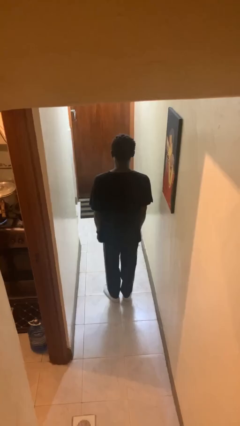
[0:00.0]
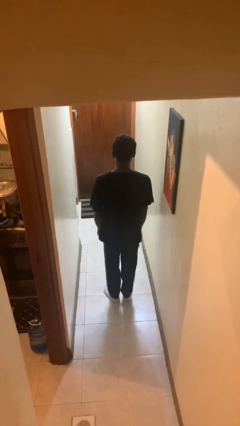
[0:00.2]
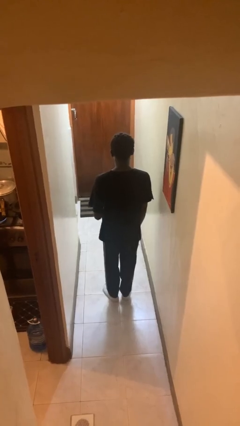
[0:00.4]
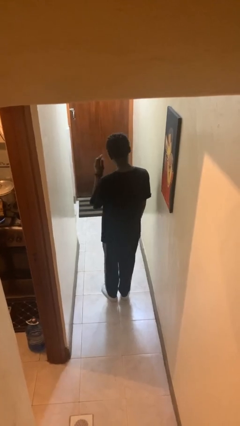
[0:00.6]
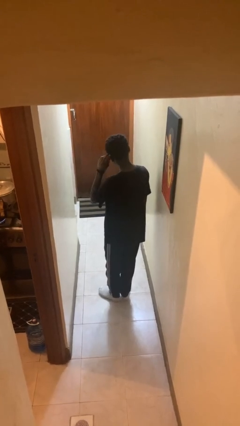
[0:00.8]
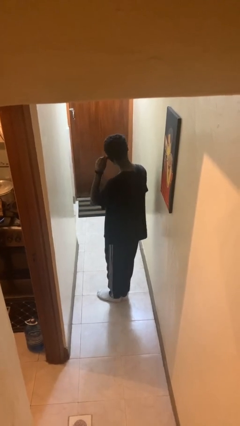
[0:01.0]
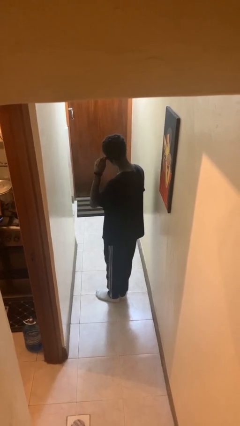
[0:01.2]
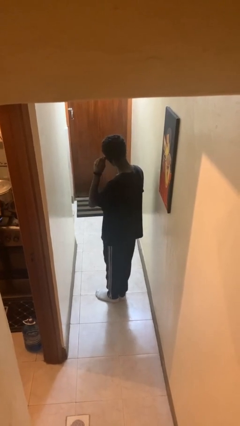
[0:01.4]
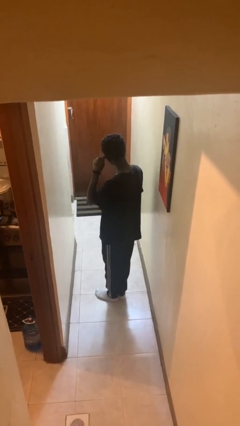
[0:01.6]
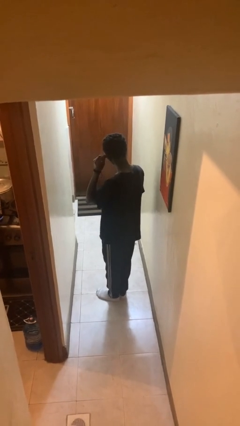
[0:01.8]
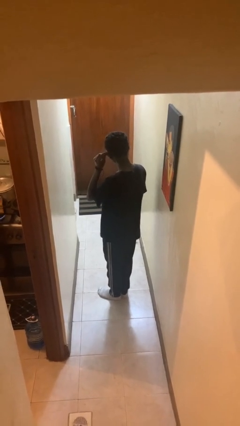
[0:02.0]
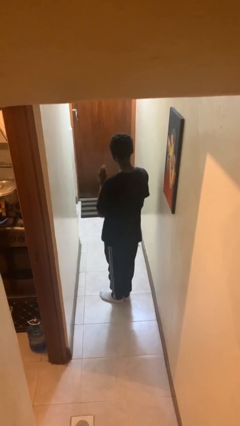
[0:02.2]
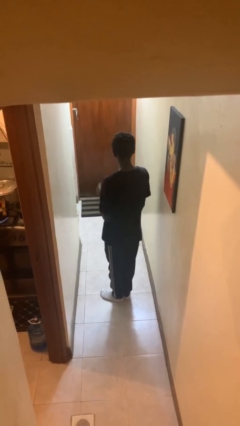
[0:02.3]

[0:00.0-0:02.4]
person touches earlobe

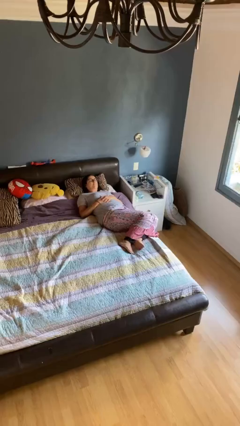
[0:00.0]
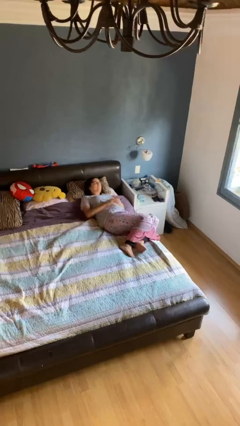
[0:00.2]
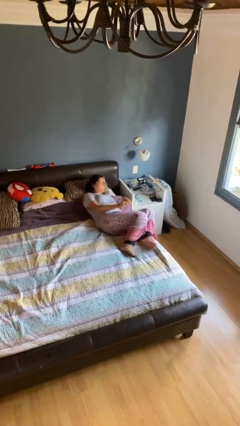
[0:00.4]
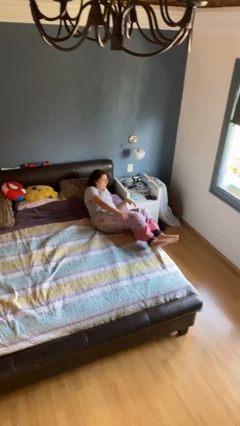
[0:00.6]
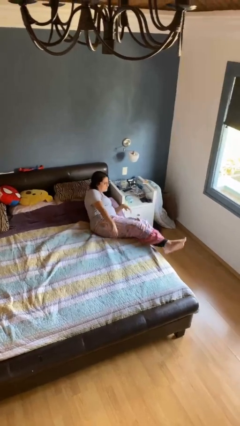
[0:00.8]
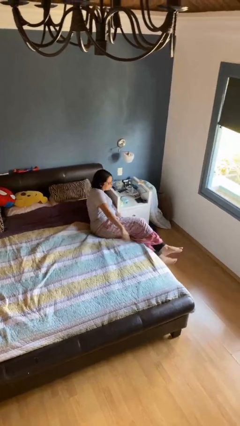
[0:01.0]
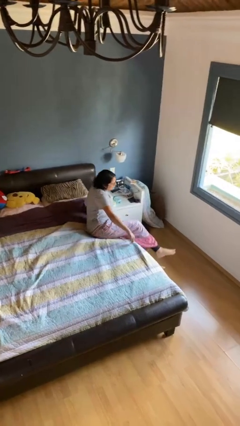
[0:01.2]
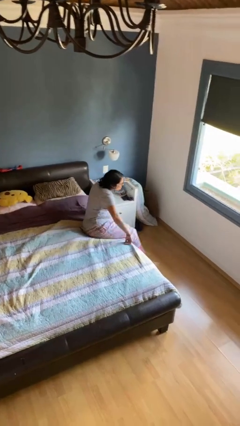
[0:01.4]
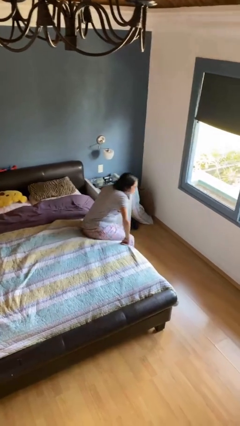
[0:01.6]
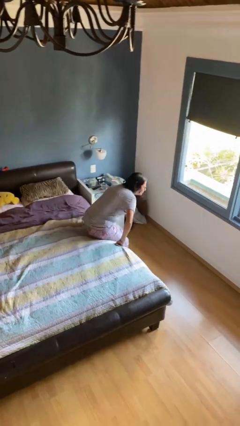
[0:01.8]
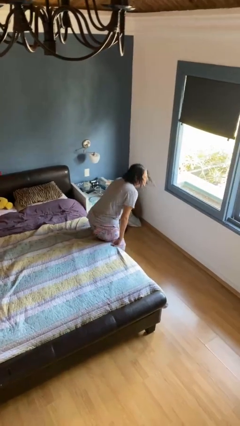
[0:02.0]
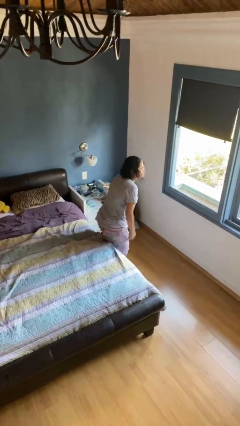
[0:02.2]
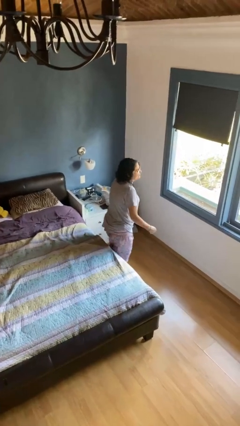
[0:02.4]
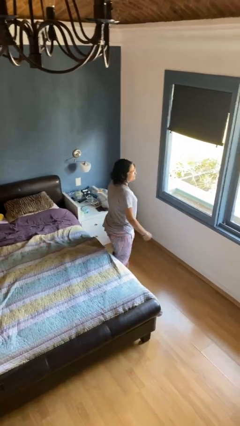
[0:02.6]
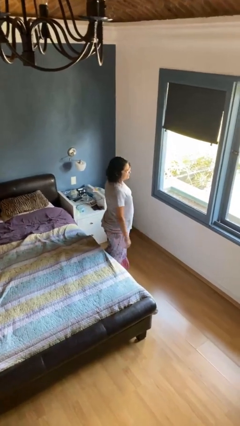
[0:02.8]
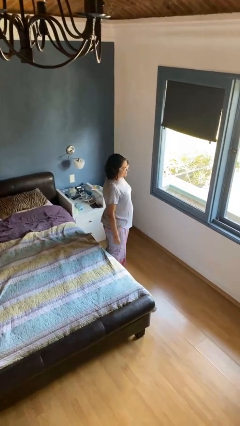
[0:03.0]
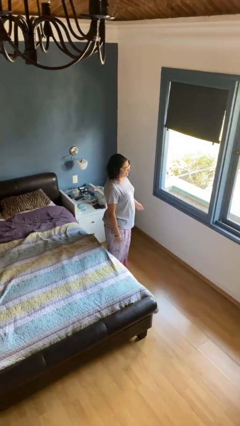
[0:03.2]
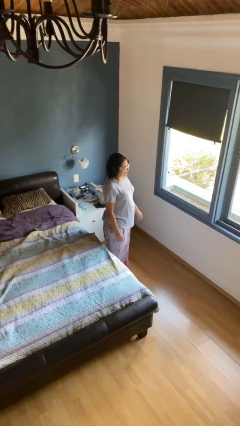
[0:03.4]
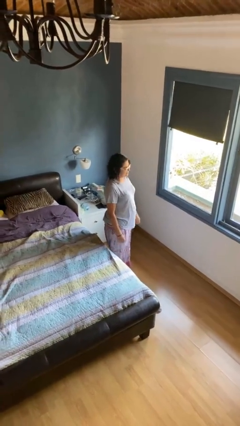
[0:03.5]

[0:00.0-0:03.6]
person stands up

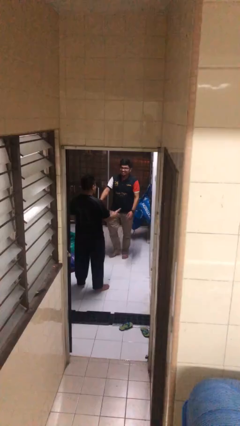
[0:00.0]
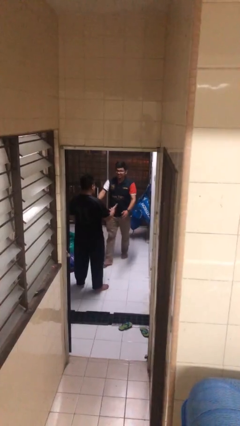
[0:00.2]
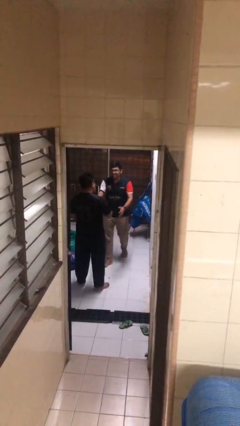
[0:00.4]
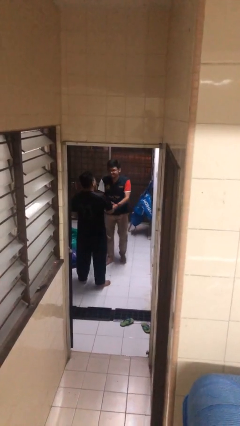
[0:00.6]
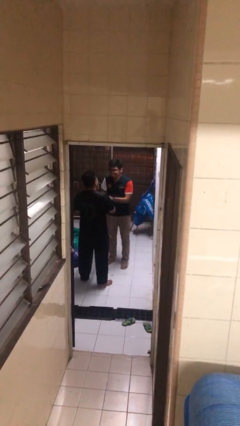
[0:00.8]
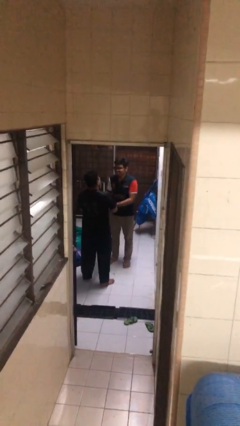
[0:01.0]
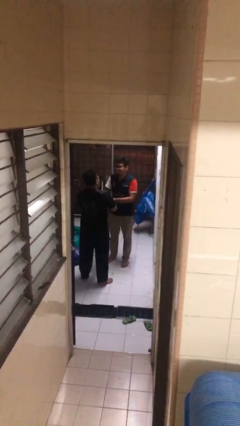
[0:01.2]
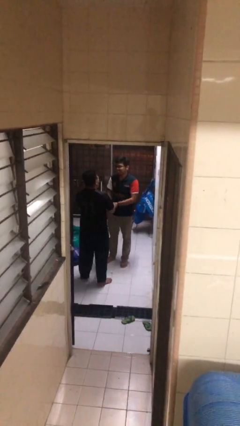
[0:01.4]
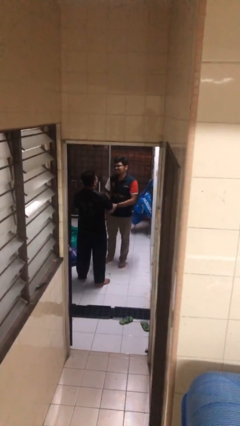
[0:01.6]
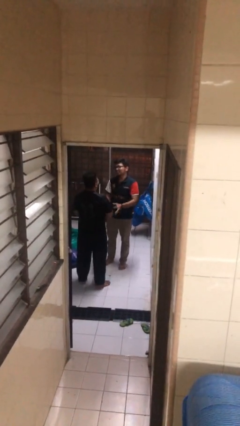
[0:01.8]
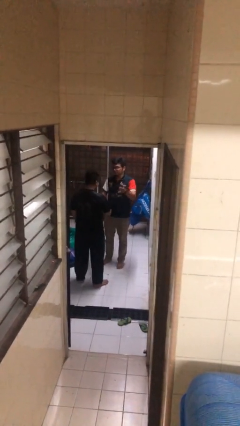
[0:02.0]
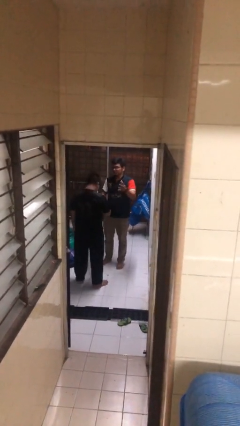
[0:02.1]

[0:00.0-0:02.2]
person shakes hand

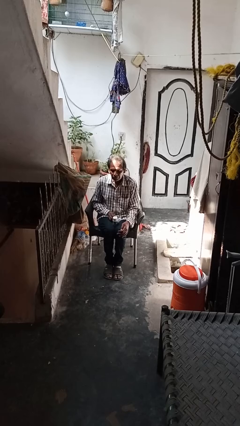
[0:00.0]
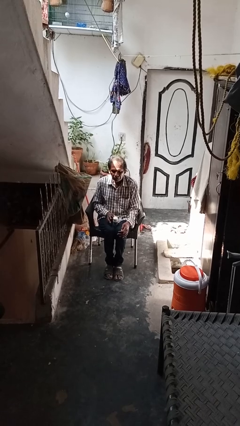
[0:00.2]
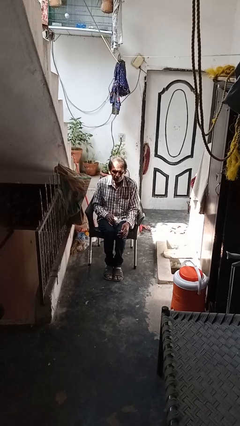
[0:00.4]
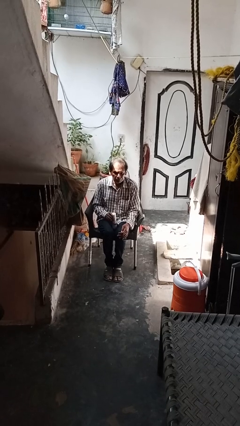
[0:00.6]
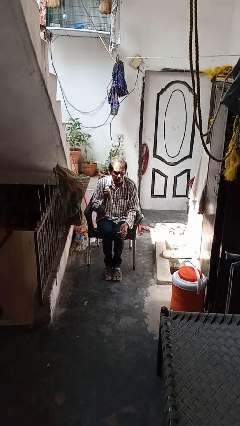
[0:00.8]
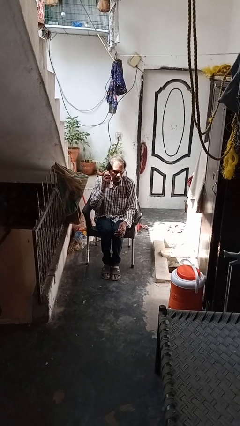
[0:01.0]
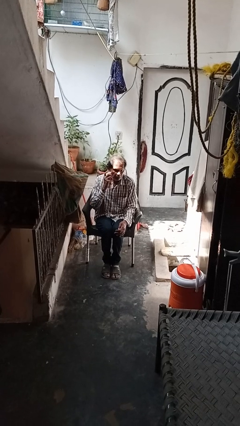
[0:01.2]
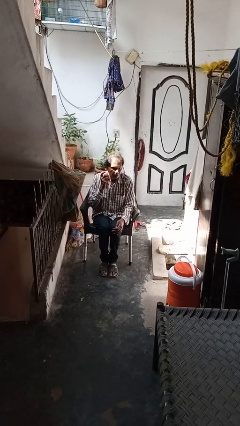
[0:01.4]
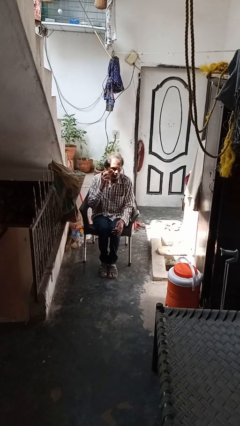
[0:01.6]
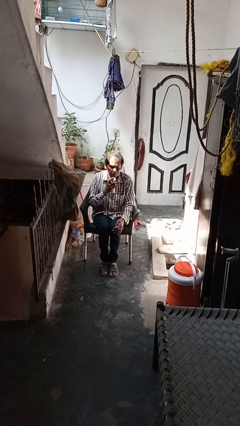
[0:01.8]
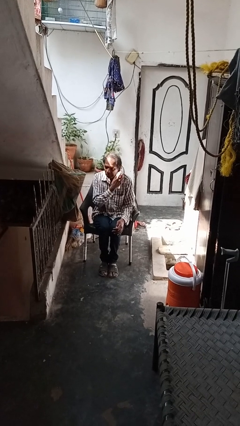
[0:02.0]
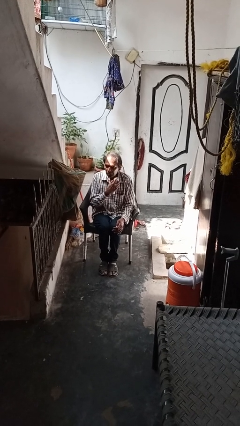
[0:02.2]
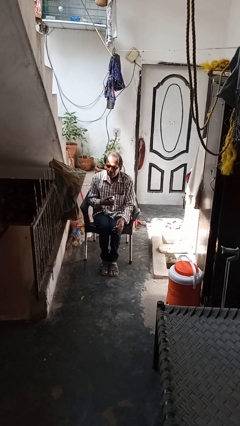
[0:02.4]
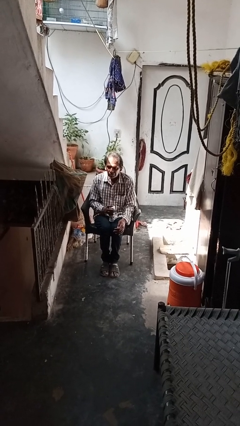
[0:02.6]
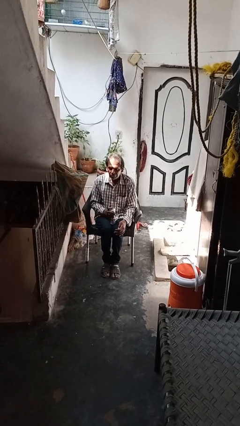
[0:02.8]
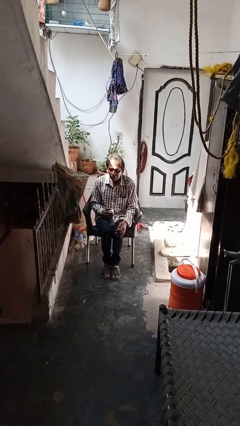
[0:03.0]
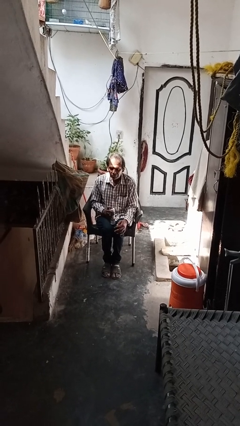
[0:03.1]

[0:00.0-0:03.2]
person applies shaving cream

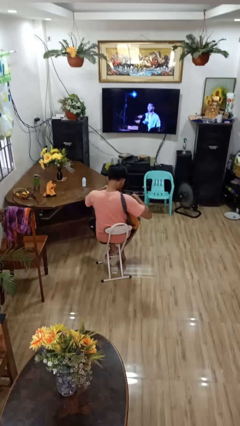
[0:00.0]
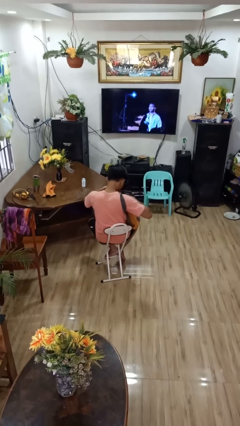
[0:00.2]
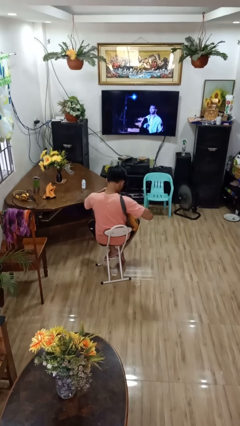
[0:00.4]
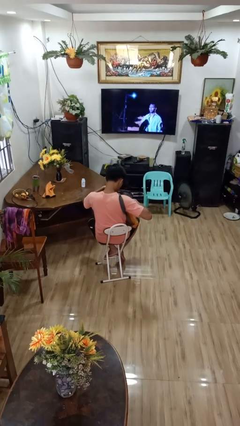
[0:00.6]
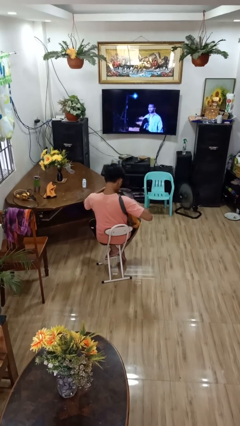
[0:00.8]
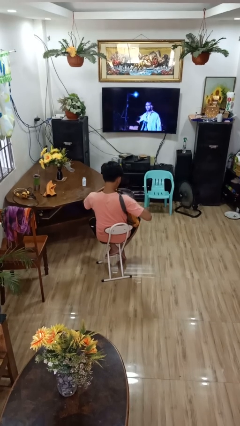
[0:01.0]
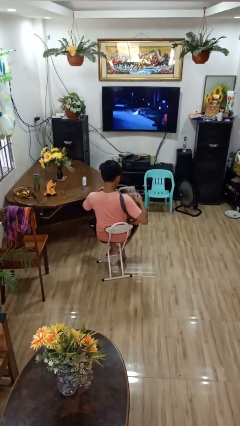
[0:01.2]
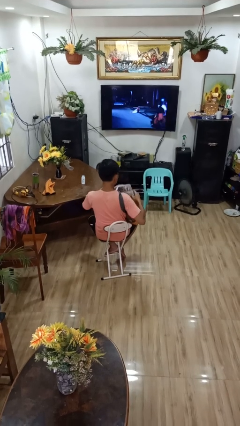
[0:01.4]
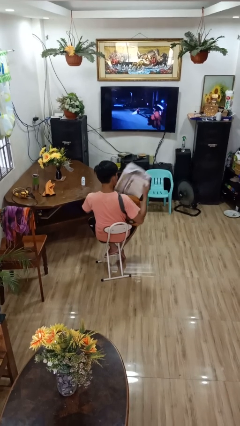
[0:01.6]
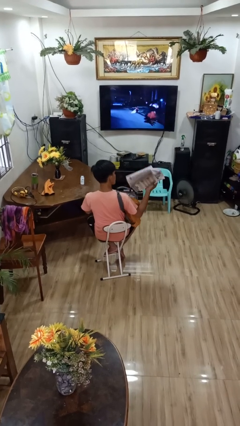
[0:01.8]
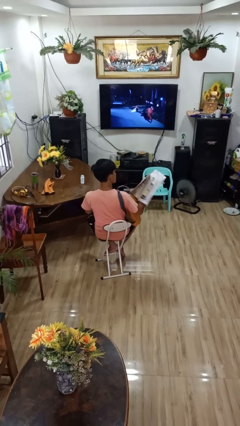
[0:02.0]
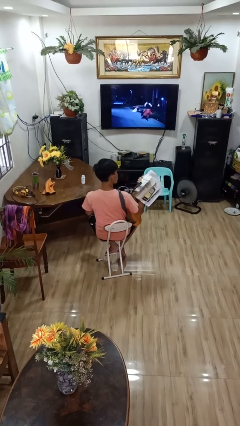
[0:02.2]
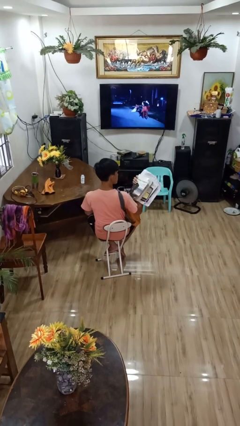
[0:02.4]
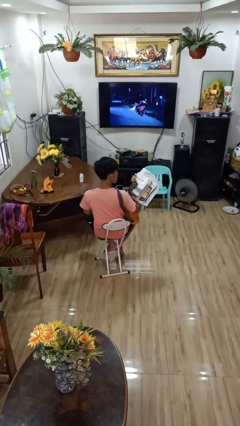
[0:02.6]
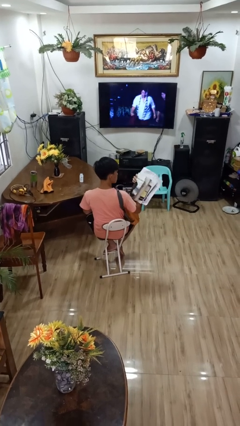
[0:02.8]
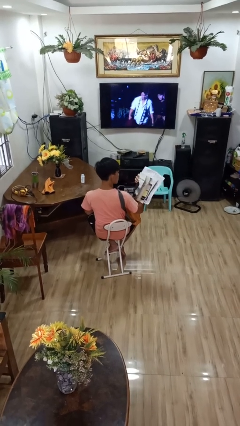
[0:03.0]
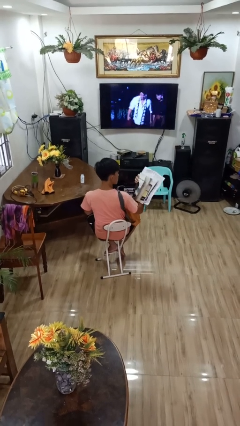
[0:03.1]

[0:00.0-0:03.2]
person takes object from backpack

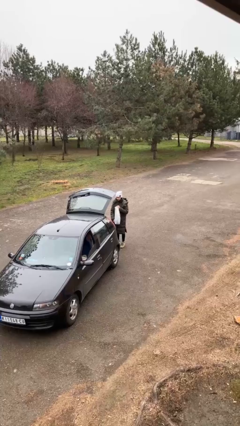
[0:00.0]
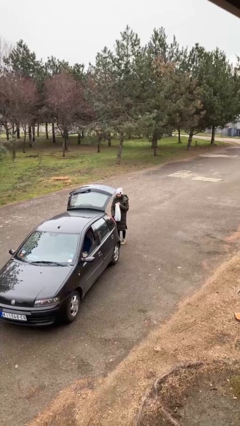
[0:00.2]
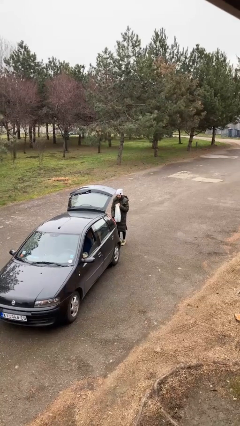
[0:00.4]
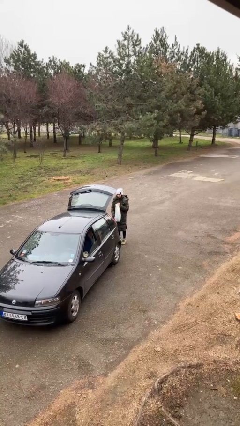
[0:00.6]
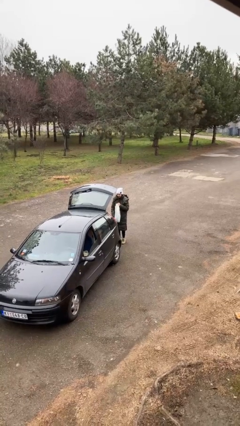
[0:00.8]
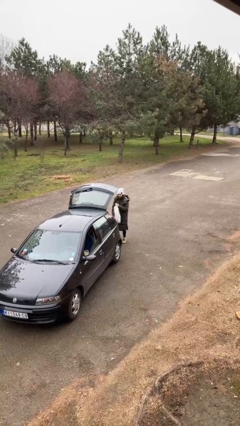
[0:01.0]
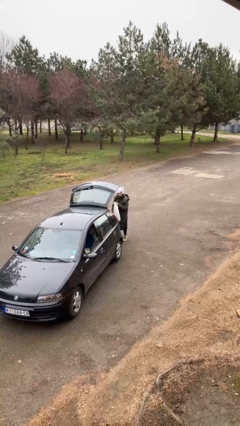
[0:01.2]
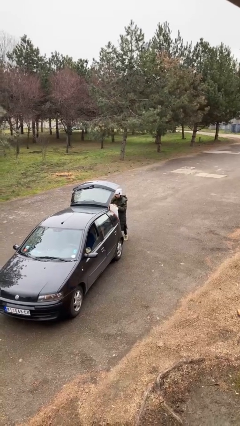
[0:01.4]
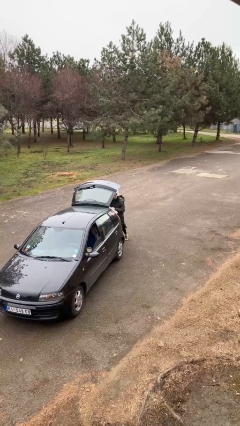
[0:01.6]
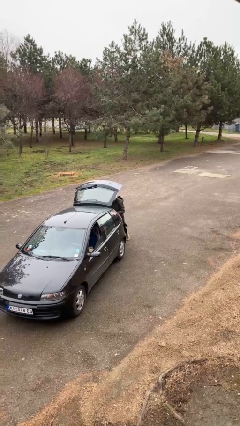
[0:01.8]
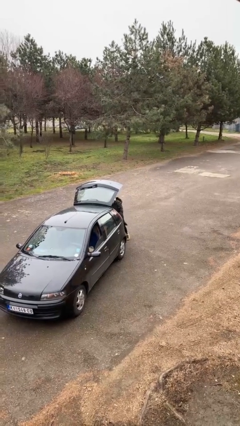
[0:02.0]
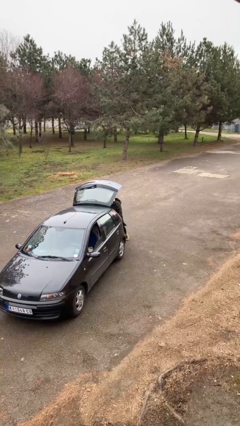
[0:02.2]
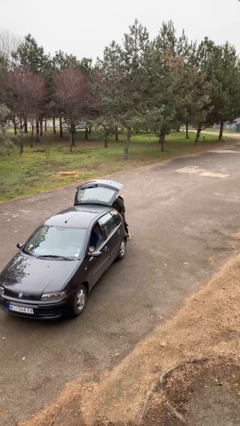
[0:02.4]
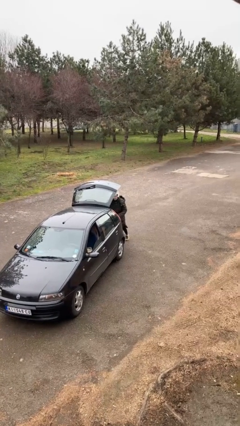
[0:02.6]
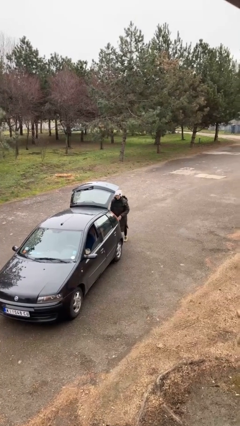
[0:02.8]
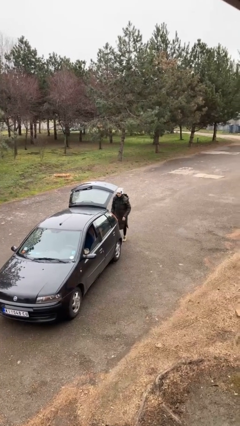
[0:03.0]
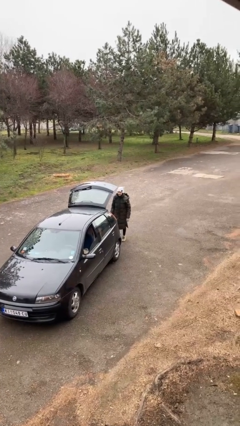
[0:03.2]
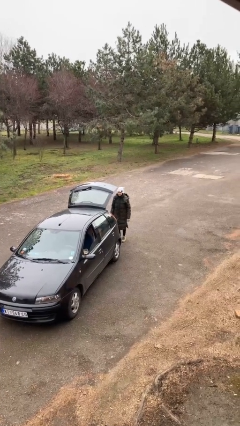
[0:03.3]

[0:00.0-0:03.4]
person loads car
